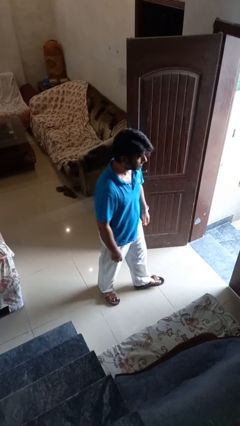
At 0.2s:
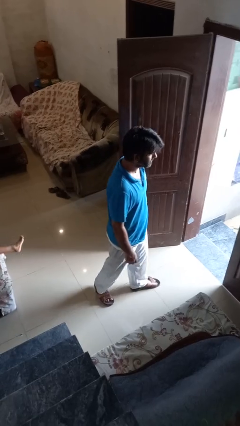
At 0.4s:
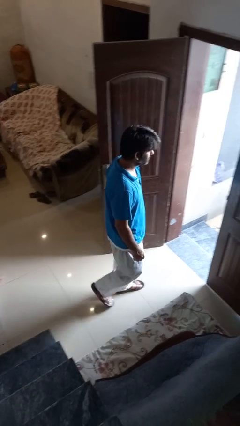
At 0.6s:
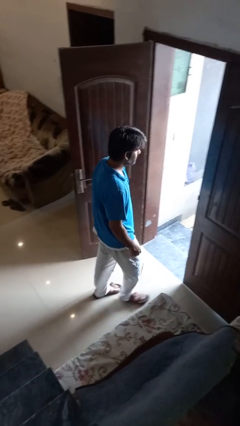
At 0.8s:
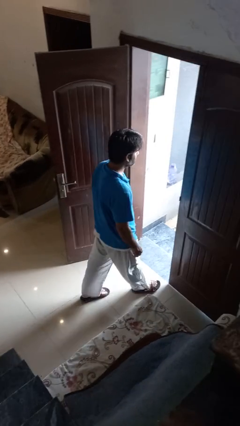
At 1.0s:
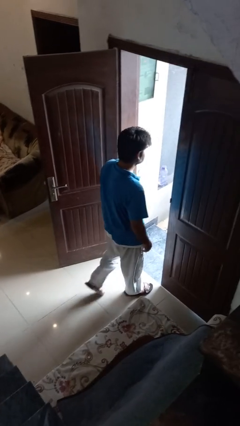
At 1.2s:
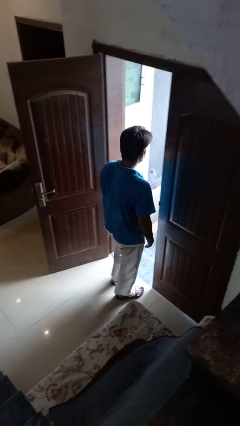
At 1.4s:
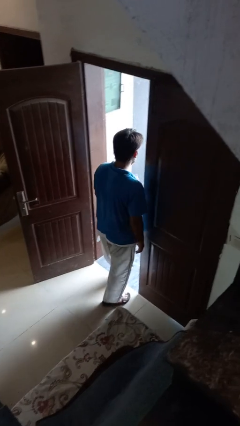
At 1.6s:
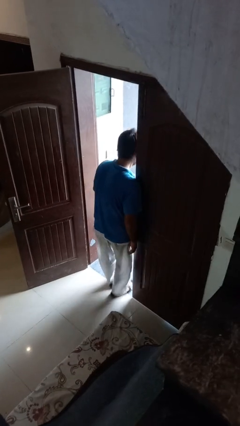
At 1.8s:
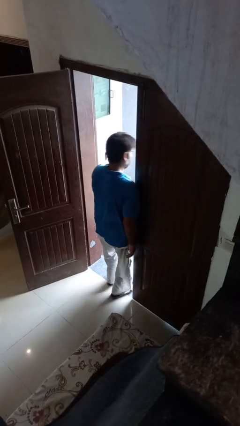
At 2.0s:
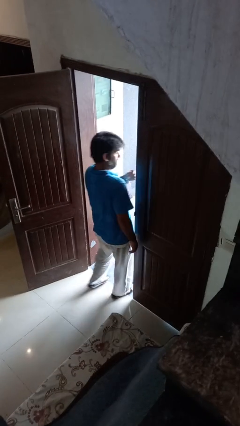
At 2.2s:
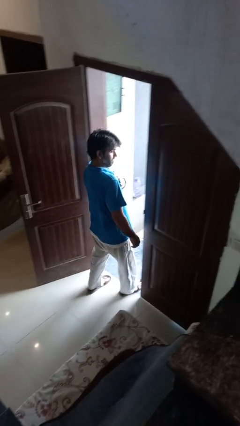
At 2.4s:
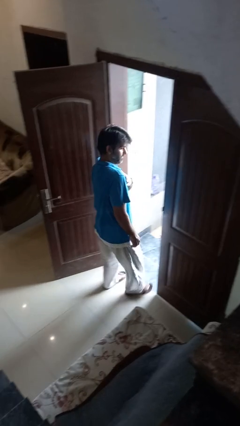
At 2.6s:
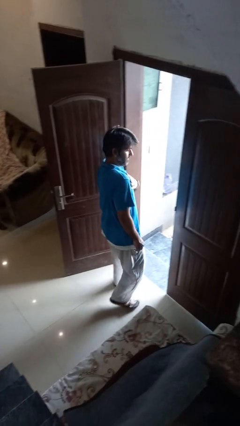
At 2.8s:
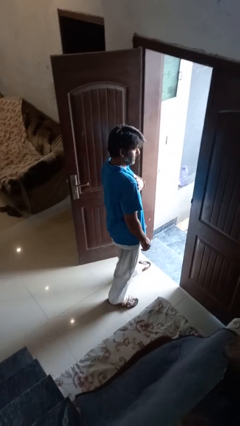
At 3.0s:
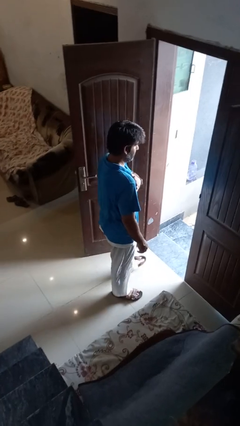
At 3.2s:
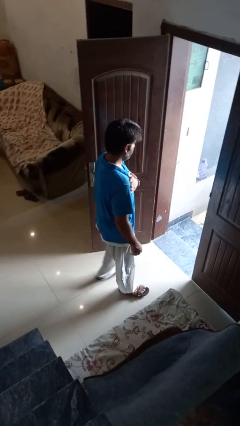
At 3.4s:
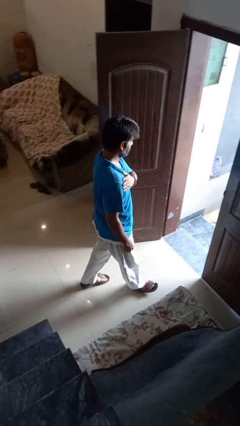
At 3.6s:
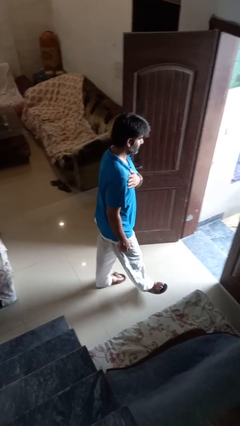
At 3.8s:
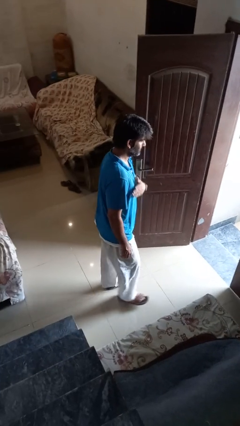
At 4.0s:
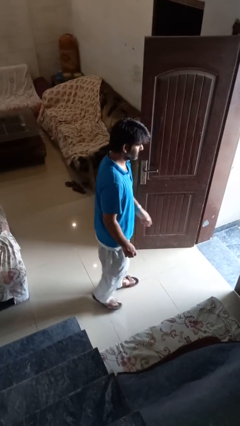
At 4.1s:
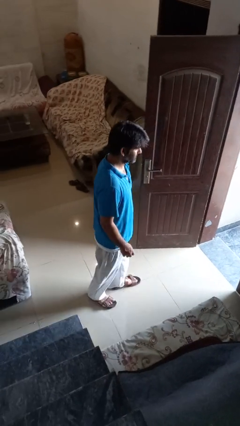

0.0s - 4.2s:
person bumps into wall

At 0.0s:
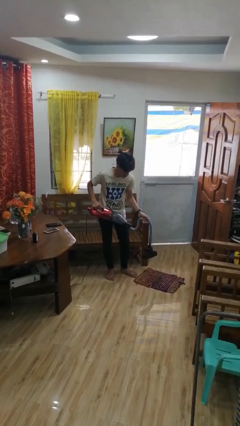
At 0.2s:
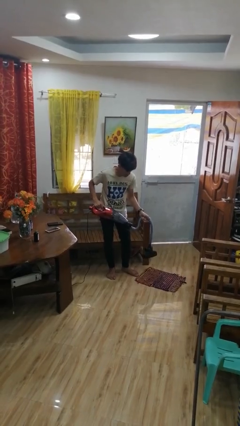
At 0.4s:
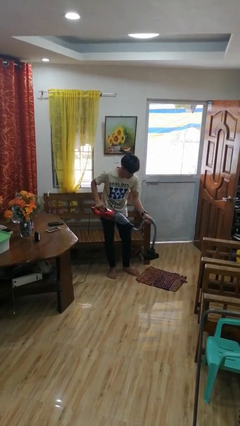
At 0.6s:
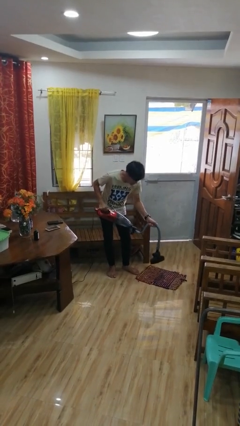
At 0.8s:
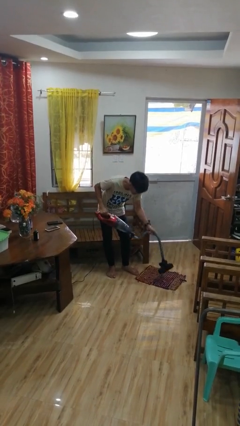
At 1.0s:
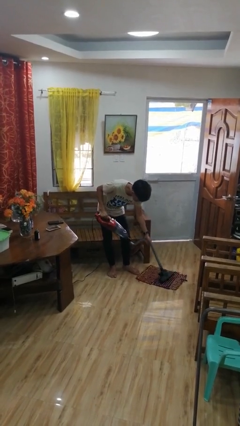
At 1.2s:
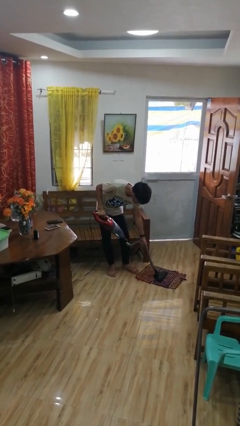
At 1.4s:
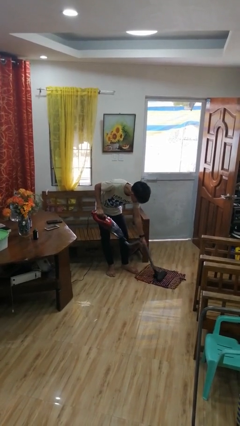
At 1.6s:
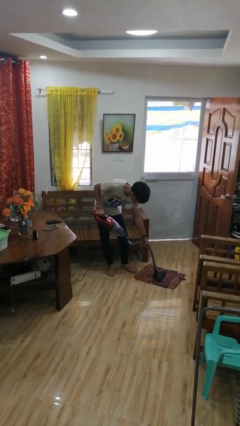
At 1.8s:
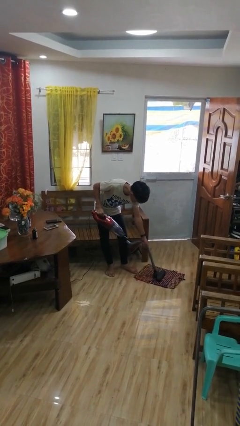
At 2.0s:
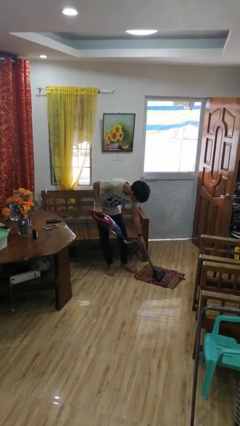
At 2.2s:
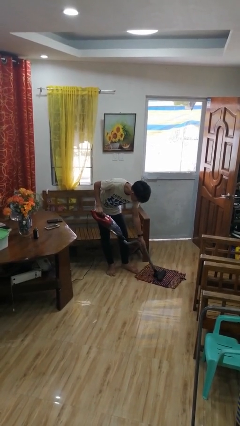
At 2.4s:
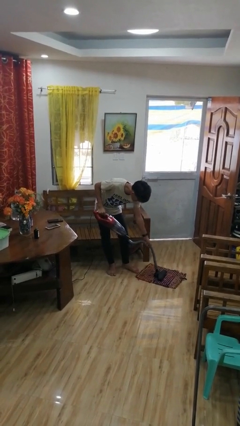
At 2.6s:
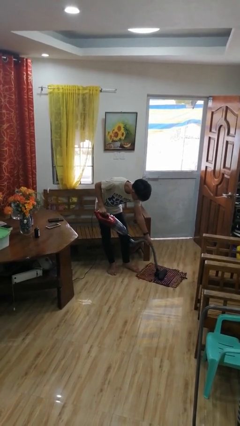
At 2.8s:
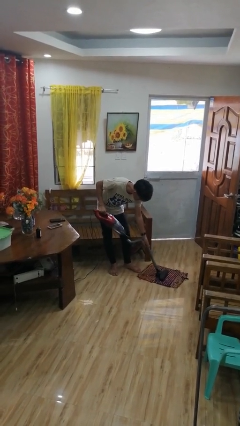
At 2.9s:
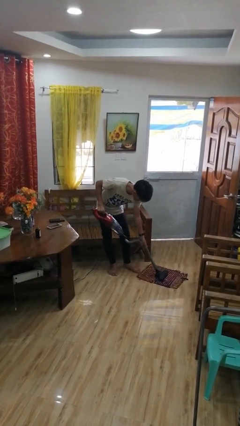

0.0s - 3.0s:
person vacuums carpet

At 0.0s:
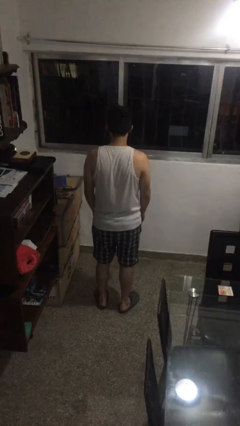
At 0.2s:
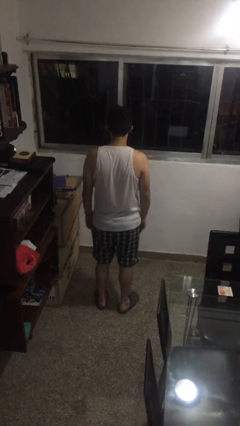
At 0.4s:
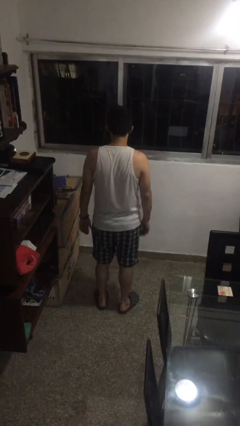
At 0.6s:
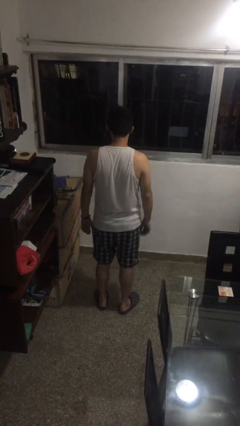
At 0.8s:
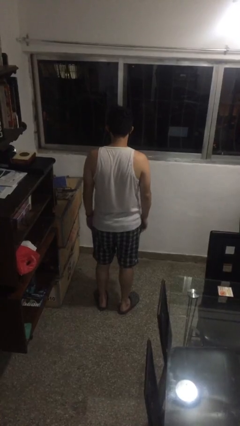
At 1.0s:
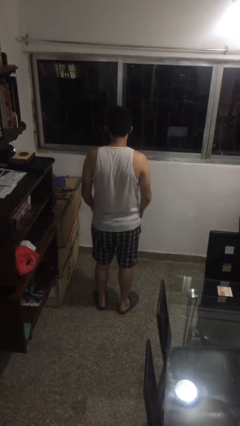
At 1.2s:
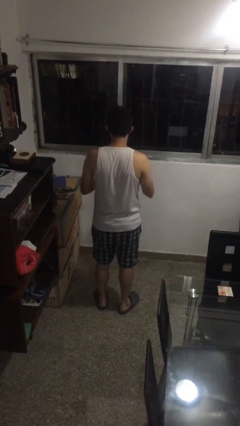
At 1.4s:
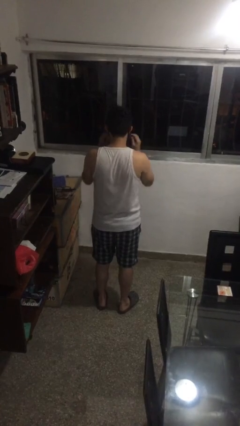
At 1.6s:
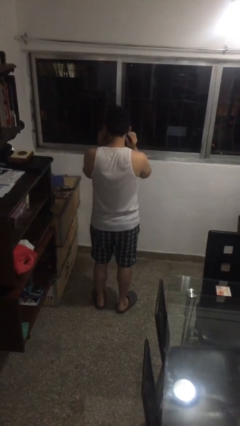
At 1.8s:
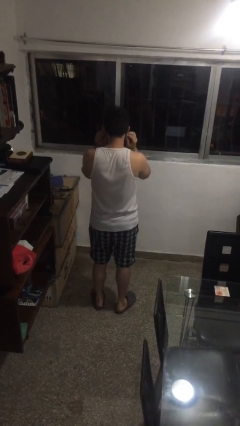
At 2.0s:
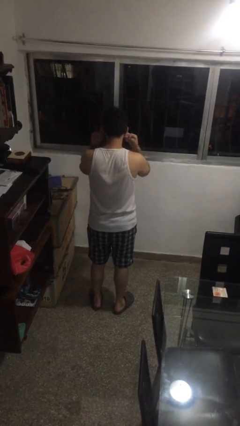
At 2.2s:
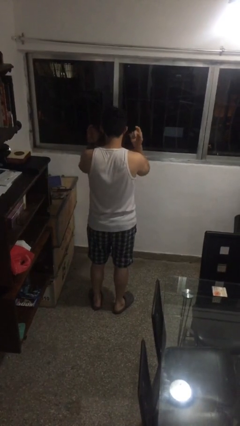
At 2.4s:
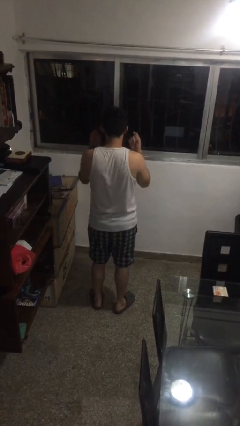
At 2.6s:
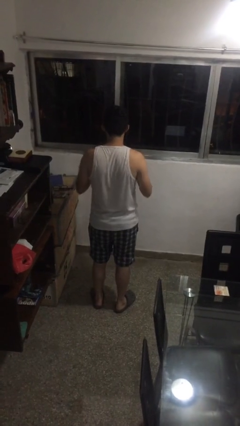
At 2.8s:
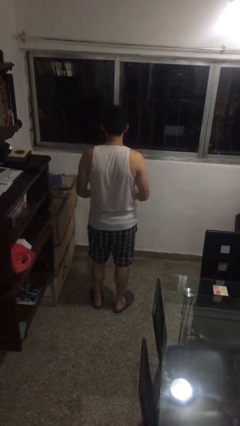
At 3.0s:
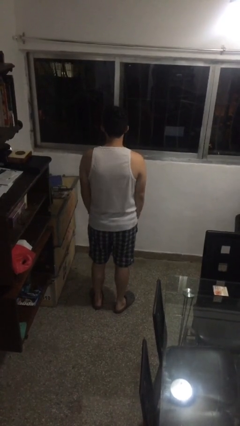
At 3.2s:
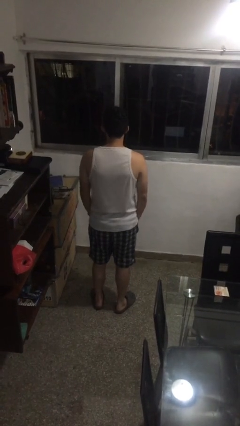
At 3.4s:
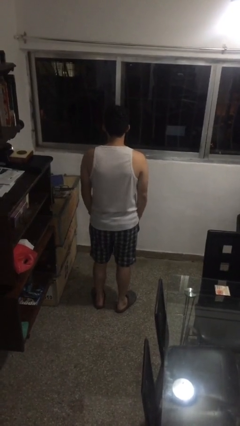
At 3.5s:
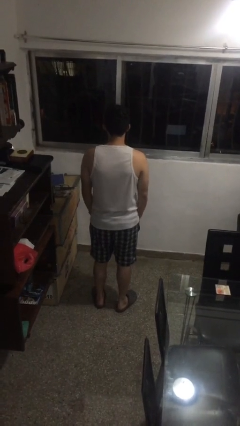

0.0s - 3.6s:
person takes off facemask

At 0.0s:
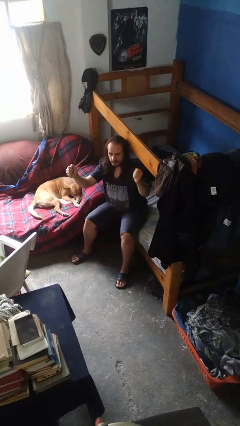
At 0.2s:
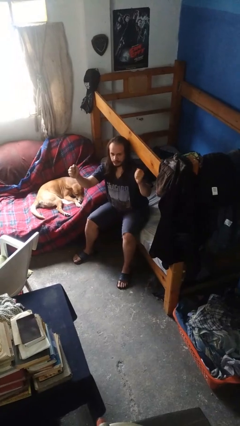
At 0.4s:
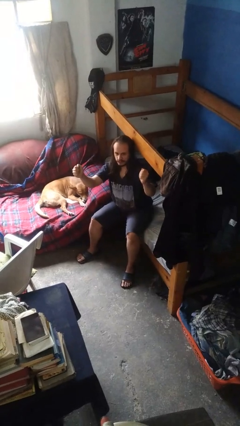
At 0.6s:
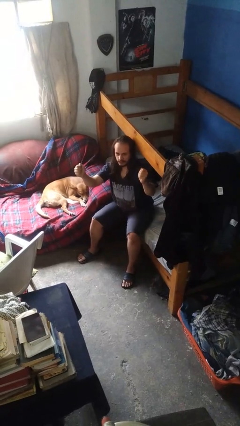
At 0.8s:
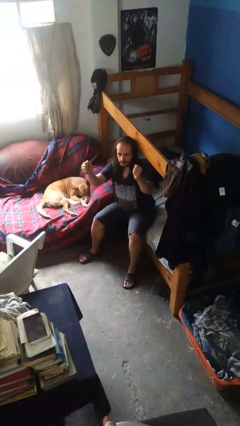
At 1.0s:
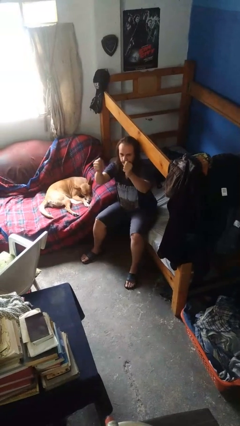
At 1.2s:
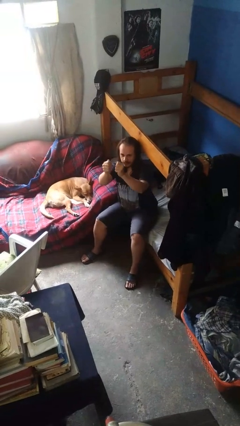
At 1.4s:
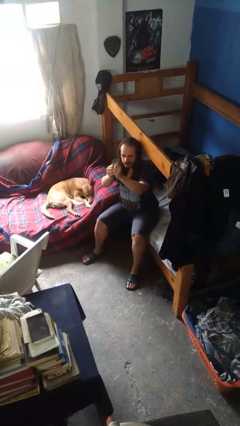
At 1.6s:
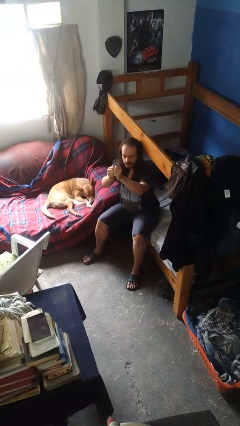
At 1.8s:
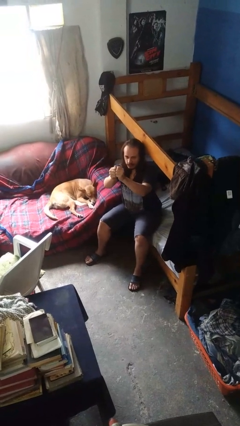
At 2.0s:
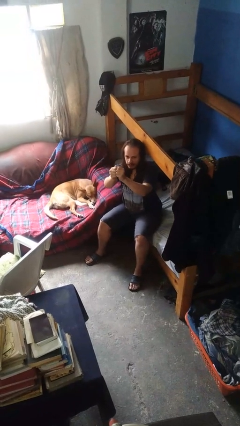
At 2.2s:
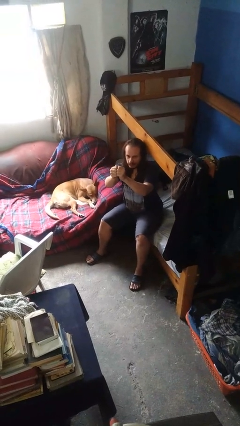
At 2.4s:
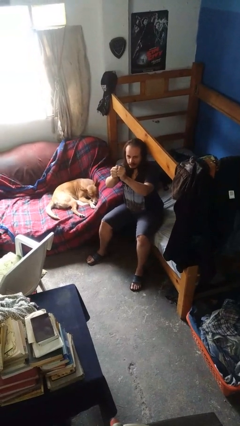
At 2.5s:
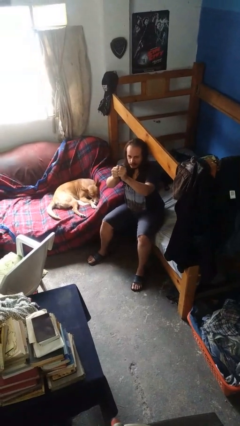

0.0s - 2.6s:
person gestures zoom out

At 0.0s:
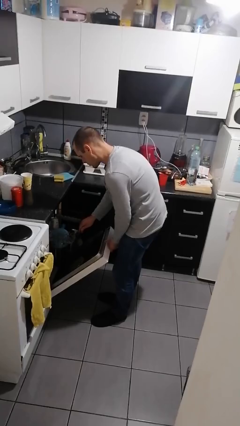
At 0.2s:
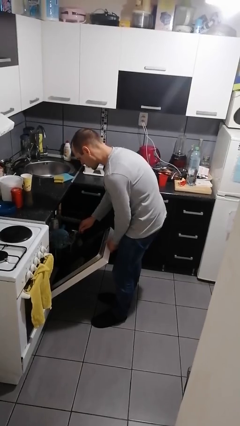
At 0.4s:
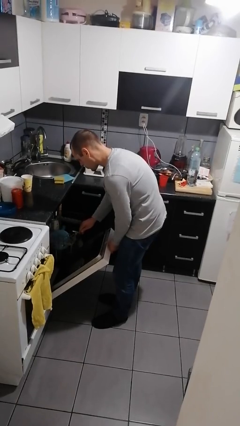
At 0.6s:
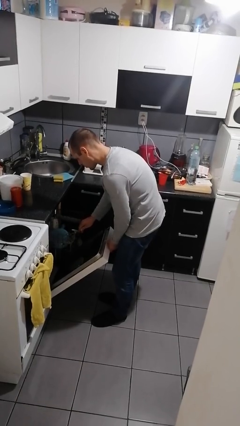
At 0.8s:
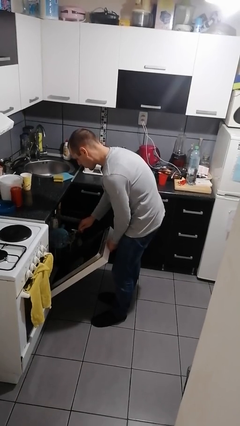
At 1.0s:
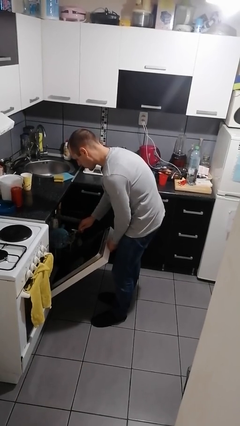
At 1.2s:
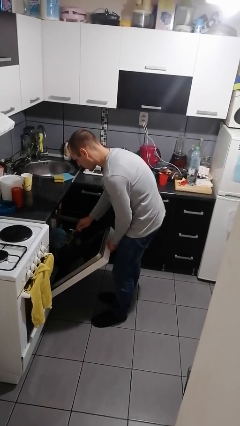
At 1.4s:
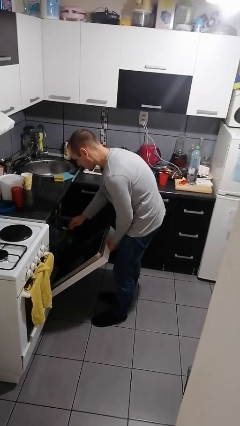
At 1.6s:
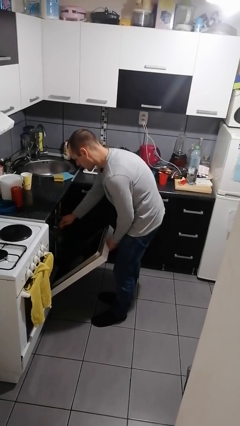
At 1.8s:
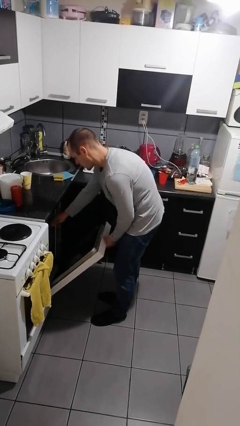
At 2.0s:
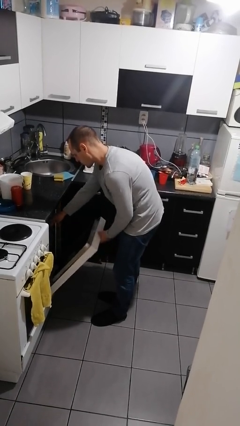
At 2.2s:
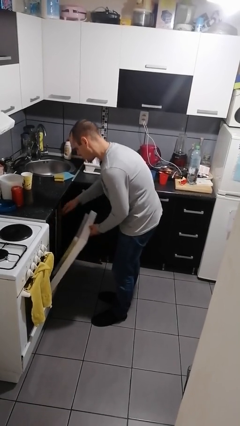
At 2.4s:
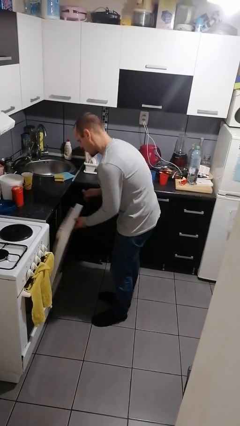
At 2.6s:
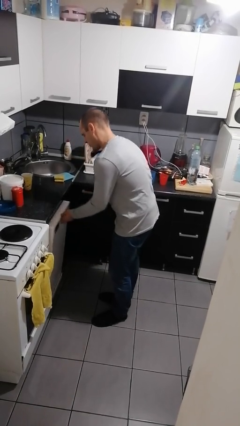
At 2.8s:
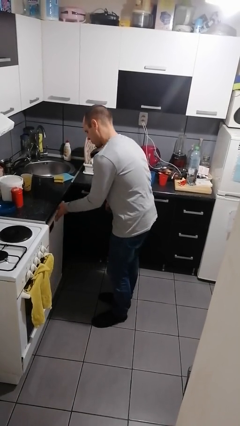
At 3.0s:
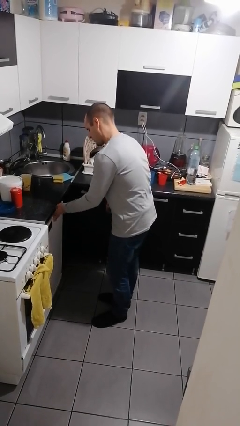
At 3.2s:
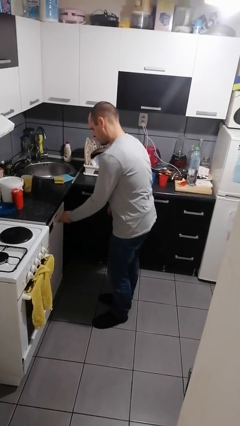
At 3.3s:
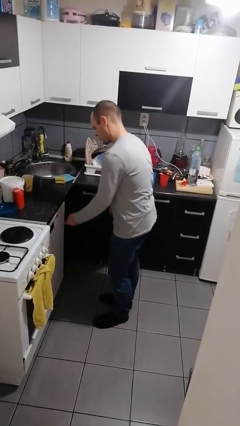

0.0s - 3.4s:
person closes dishwasher

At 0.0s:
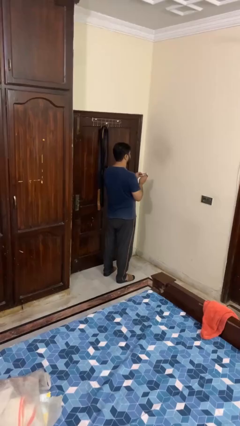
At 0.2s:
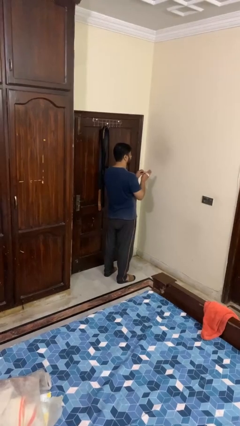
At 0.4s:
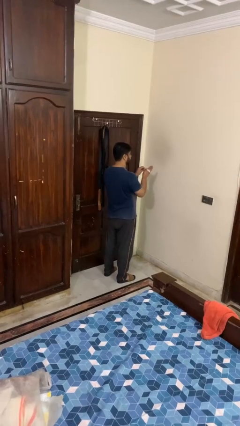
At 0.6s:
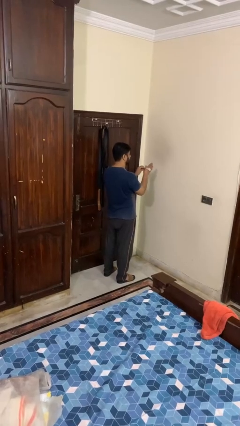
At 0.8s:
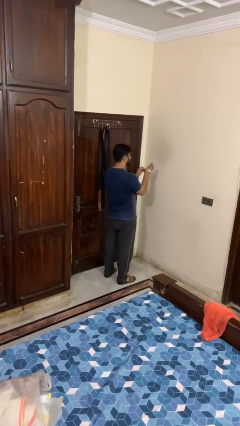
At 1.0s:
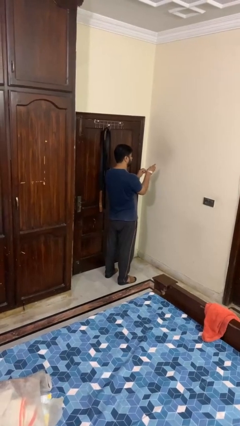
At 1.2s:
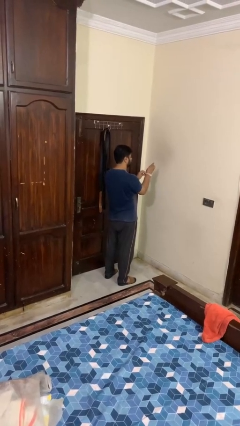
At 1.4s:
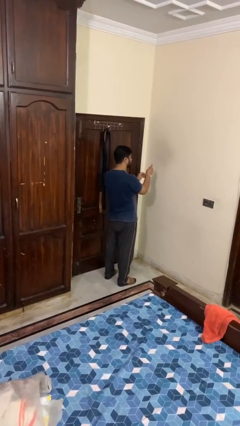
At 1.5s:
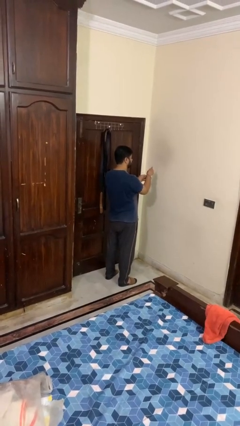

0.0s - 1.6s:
person puts on wristwatch
